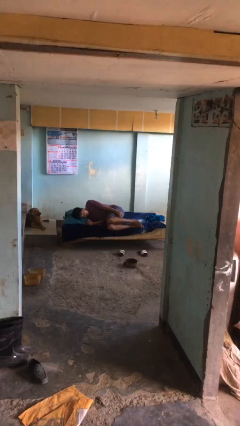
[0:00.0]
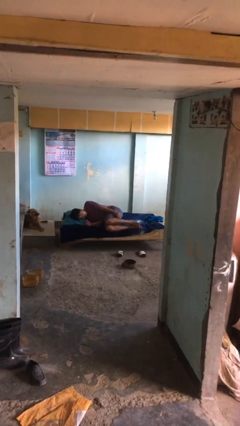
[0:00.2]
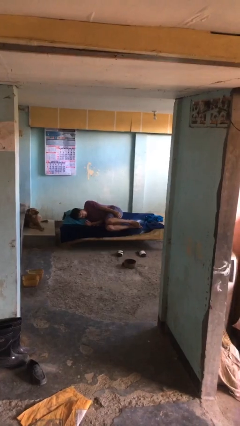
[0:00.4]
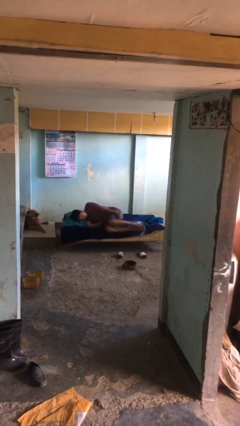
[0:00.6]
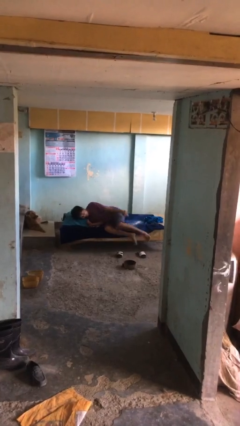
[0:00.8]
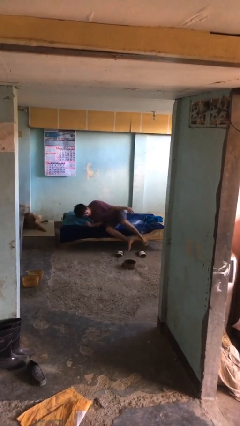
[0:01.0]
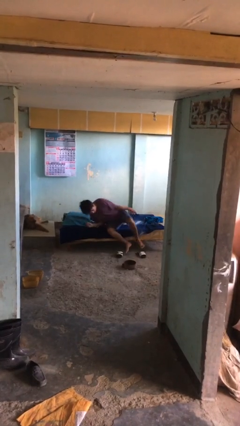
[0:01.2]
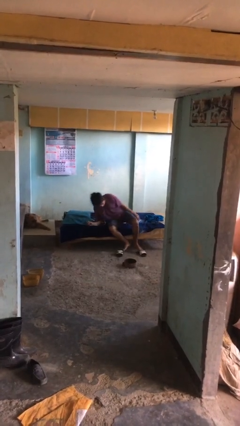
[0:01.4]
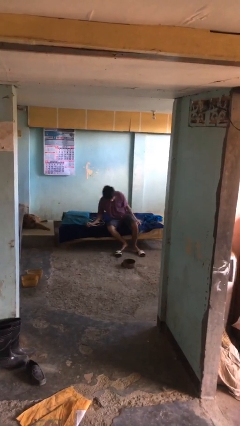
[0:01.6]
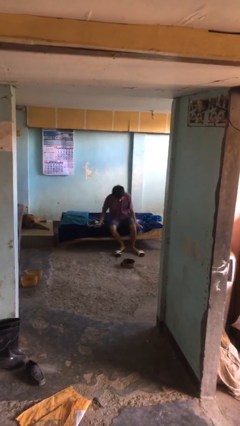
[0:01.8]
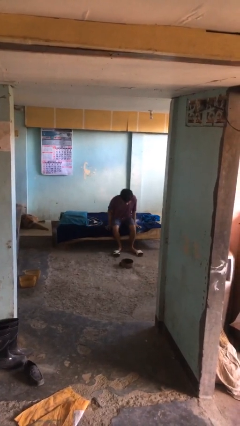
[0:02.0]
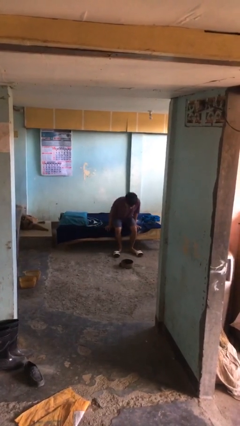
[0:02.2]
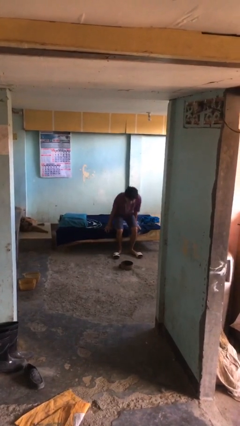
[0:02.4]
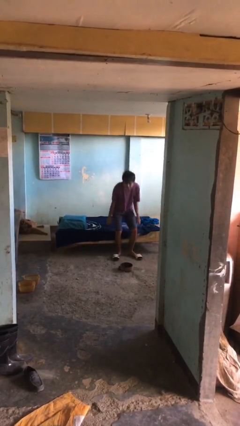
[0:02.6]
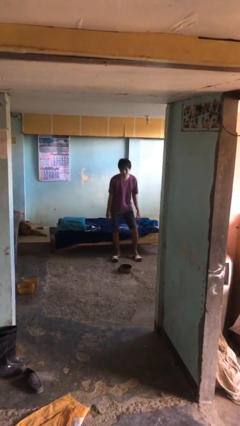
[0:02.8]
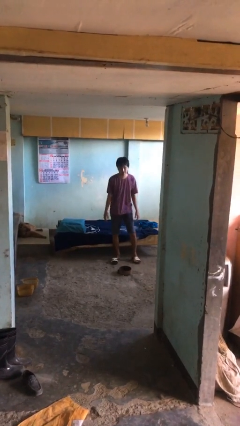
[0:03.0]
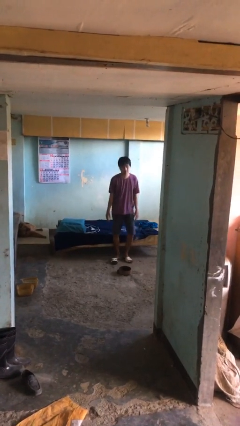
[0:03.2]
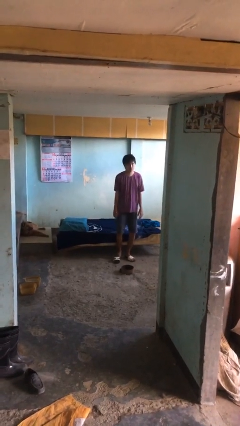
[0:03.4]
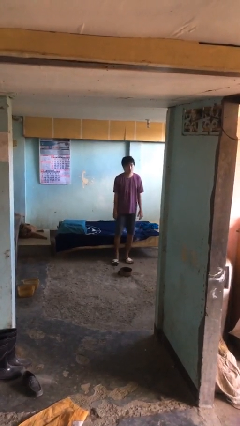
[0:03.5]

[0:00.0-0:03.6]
person stands up

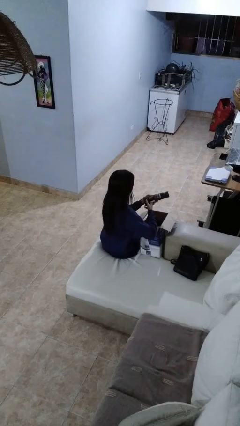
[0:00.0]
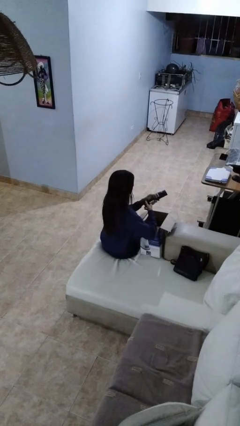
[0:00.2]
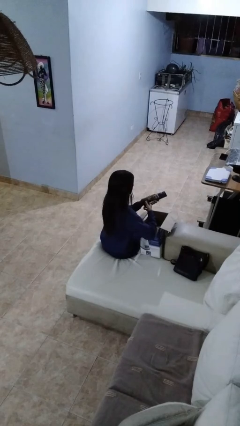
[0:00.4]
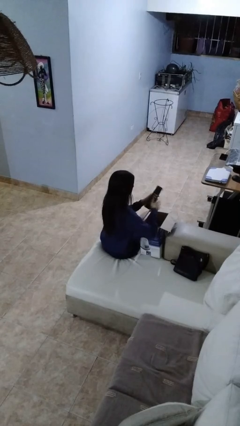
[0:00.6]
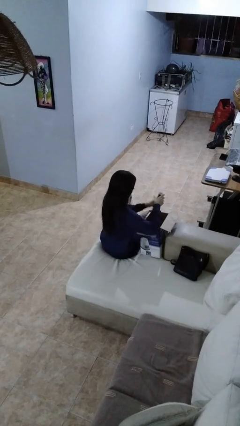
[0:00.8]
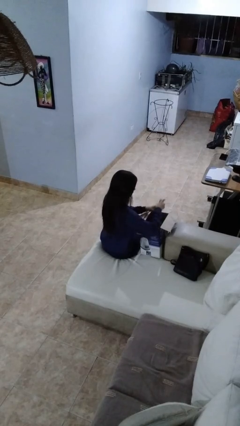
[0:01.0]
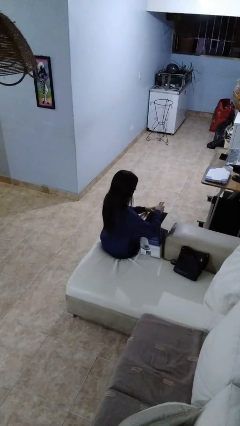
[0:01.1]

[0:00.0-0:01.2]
person puts object into box

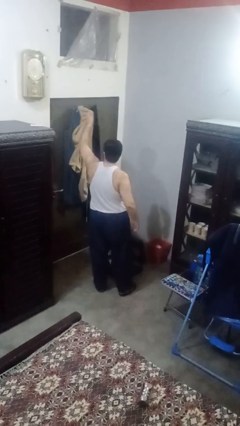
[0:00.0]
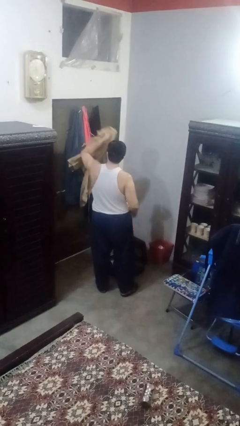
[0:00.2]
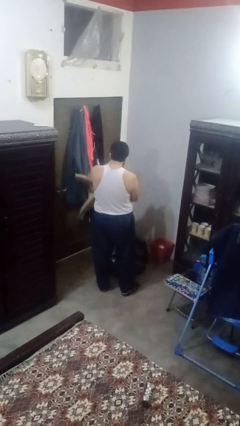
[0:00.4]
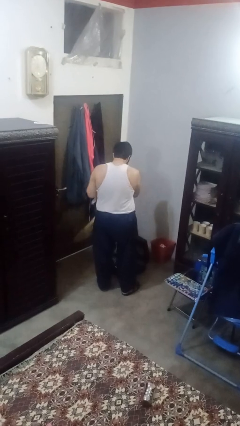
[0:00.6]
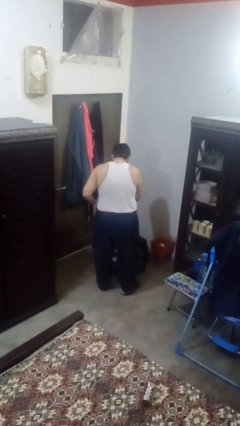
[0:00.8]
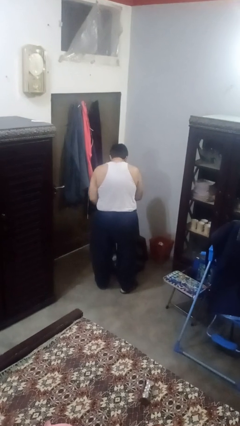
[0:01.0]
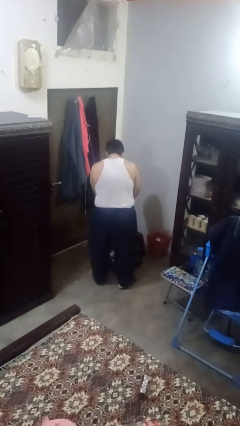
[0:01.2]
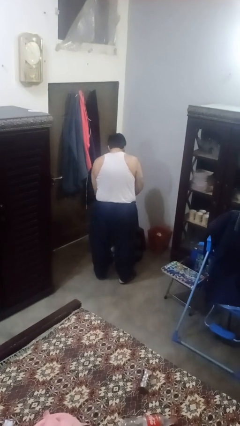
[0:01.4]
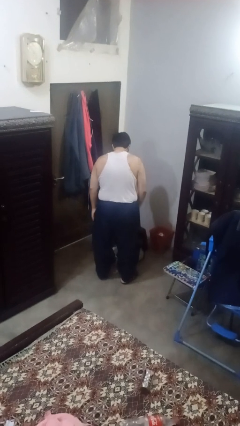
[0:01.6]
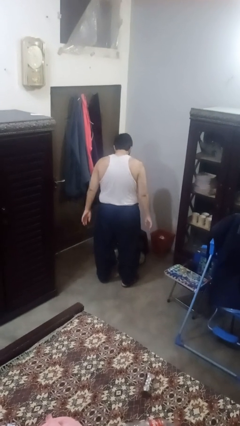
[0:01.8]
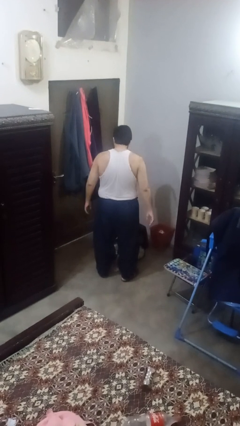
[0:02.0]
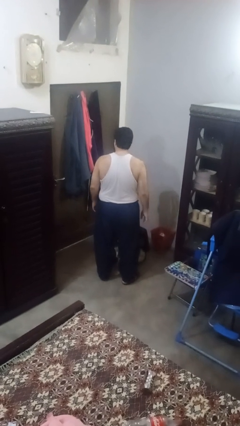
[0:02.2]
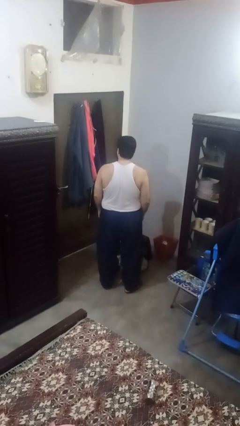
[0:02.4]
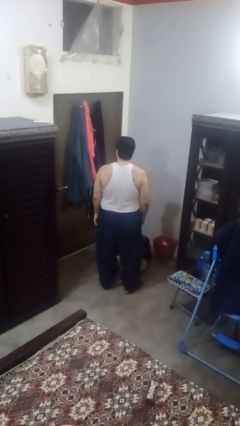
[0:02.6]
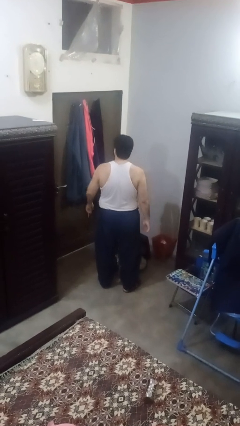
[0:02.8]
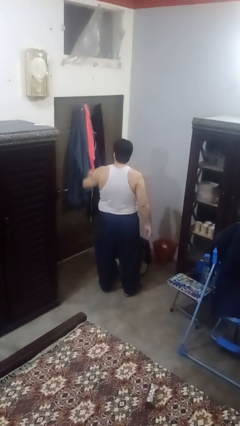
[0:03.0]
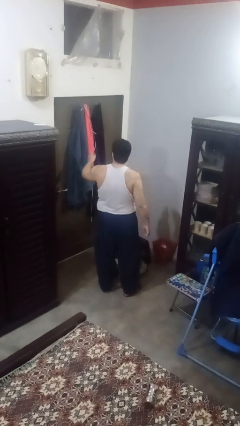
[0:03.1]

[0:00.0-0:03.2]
person loads clothes into suitcase

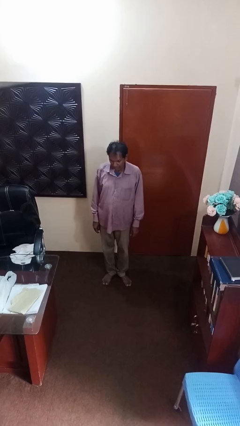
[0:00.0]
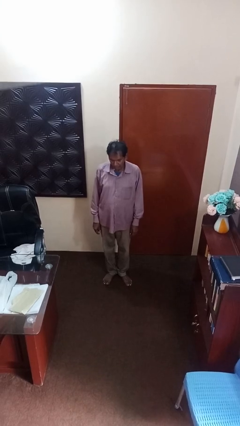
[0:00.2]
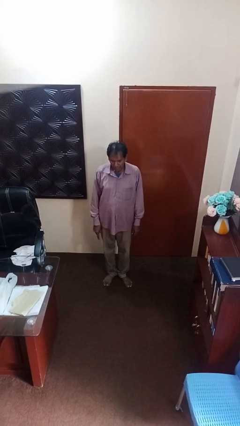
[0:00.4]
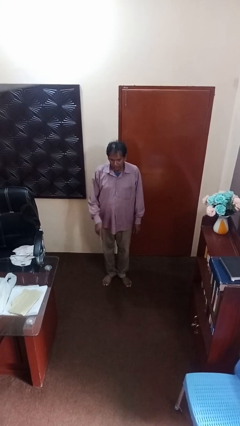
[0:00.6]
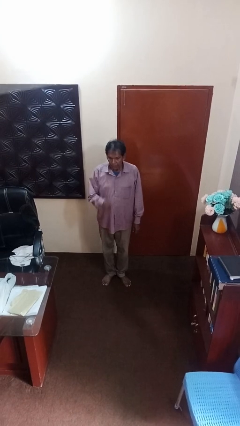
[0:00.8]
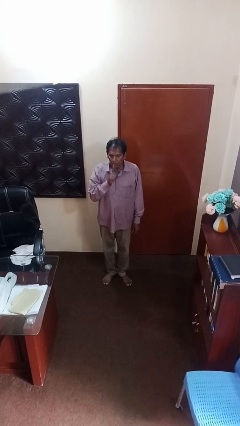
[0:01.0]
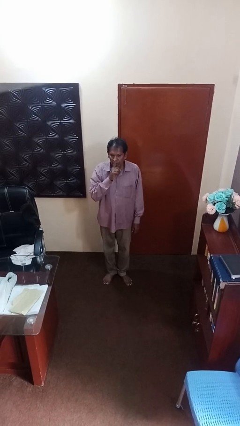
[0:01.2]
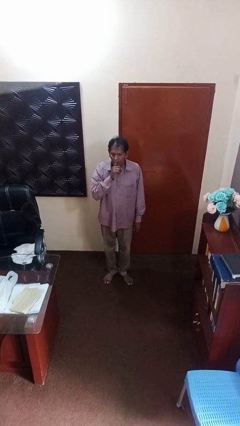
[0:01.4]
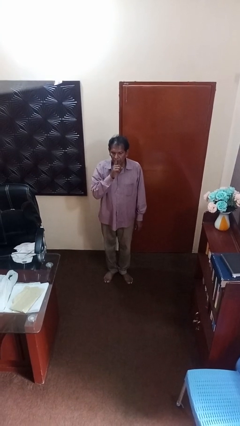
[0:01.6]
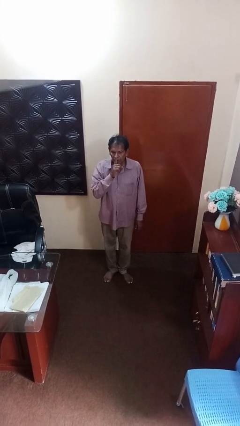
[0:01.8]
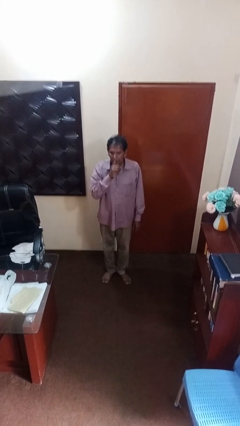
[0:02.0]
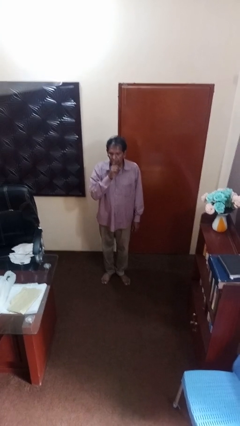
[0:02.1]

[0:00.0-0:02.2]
person gestures blow kiss

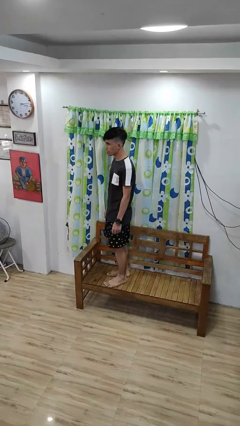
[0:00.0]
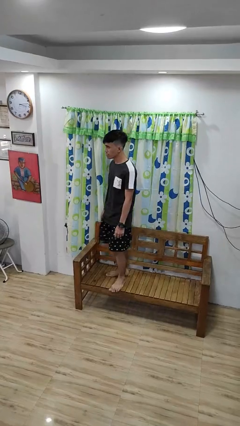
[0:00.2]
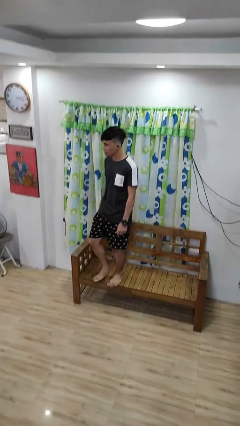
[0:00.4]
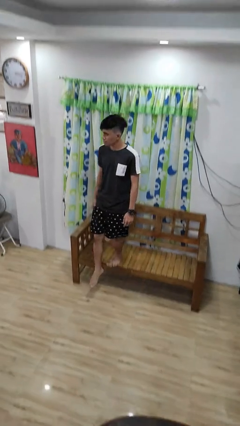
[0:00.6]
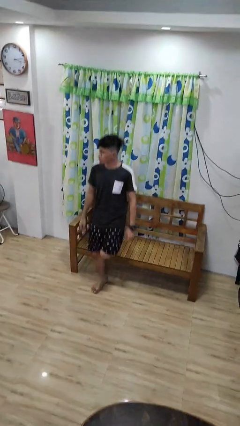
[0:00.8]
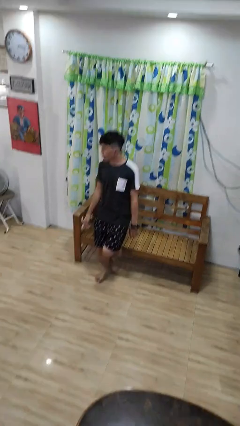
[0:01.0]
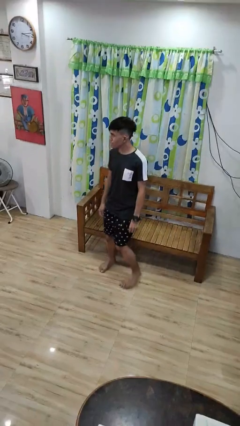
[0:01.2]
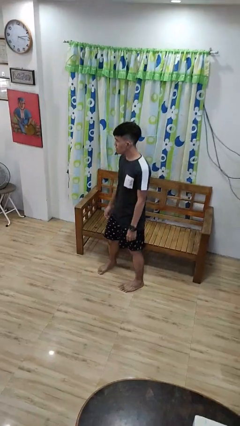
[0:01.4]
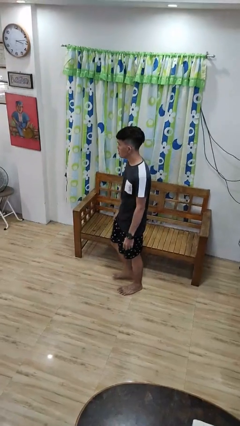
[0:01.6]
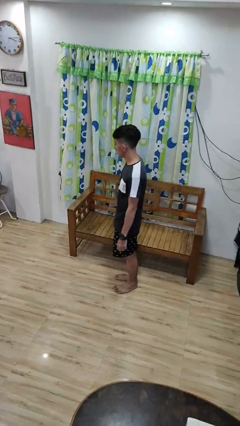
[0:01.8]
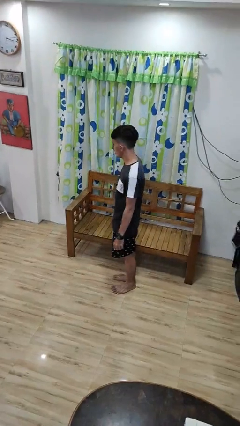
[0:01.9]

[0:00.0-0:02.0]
person climbs off couch

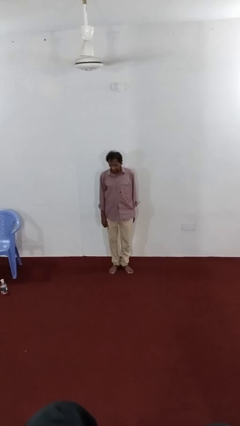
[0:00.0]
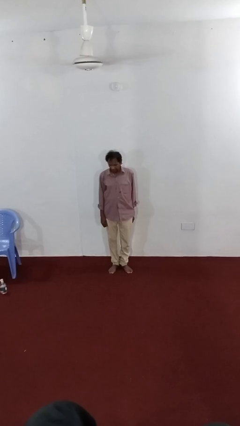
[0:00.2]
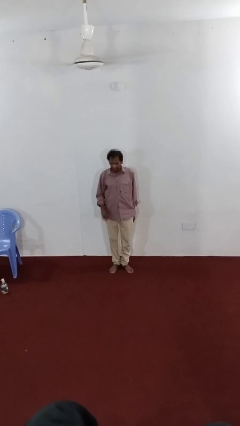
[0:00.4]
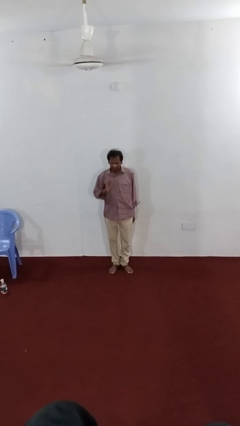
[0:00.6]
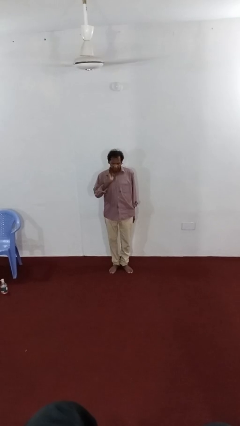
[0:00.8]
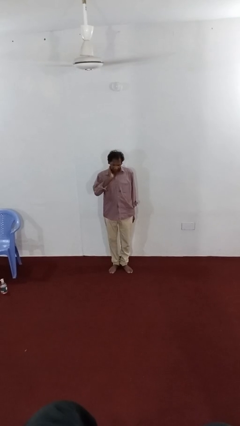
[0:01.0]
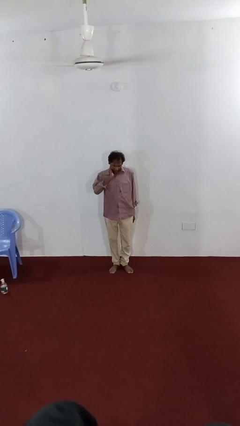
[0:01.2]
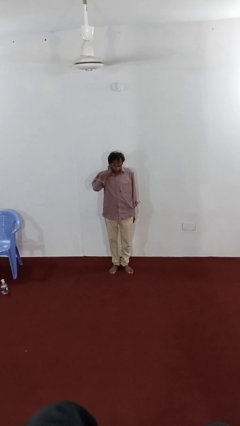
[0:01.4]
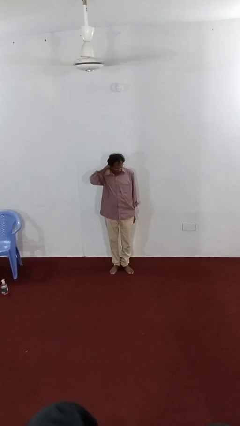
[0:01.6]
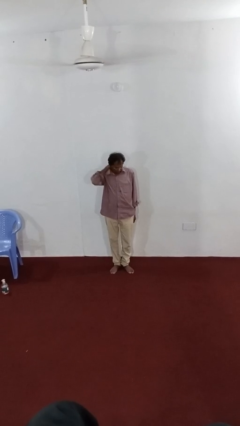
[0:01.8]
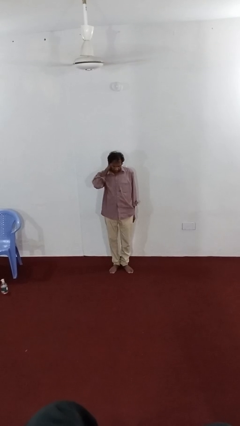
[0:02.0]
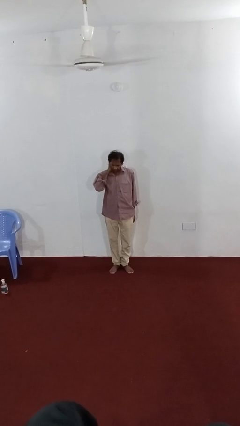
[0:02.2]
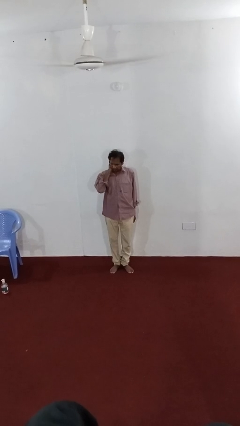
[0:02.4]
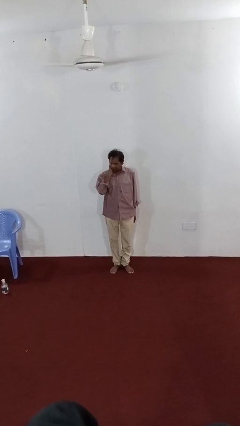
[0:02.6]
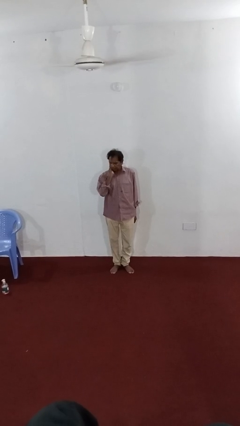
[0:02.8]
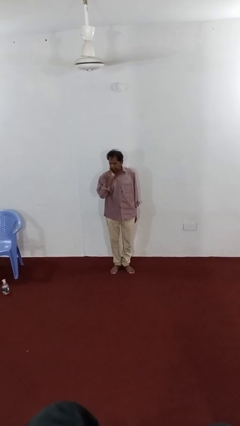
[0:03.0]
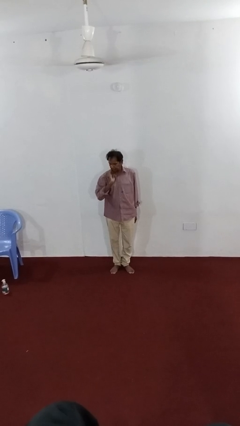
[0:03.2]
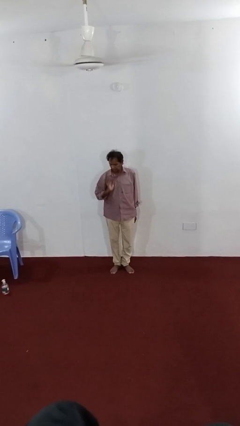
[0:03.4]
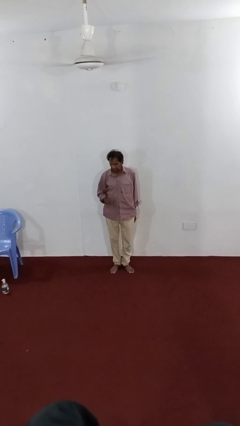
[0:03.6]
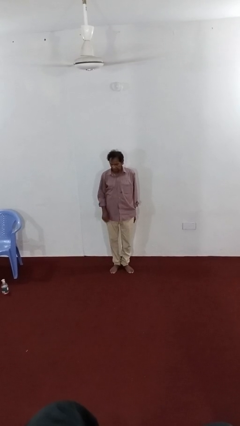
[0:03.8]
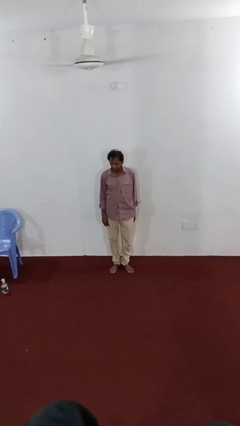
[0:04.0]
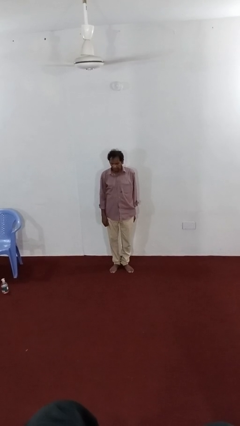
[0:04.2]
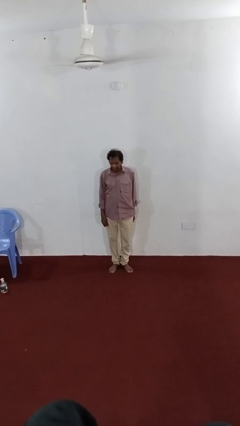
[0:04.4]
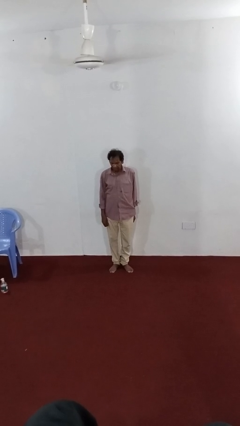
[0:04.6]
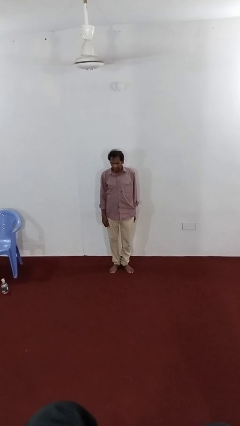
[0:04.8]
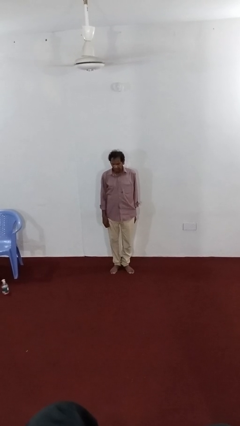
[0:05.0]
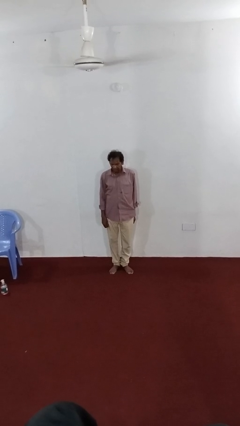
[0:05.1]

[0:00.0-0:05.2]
person rubs neck
